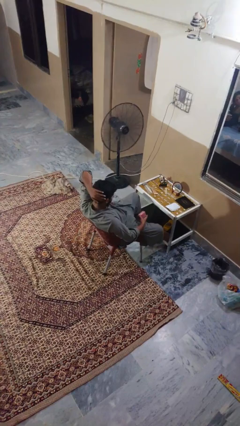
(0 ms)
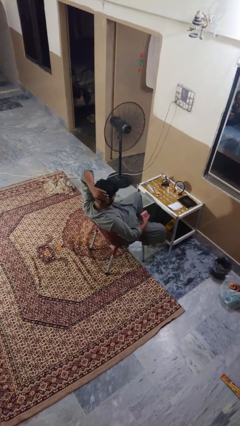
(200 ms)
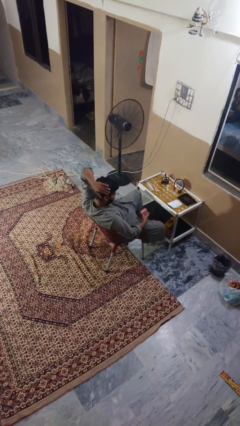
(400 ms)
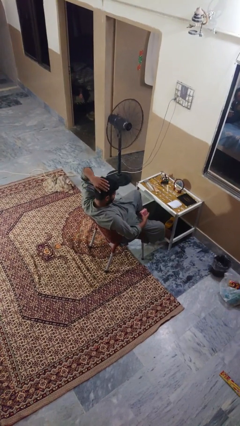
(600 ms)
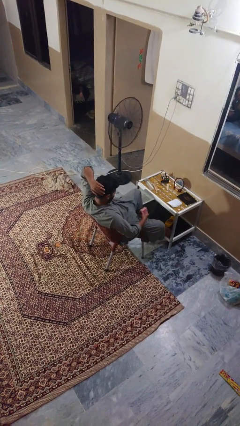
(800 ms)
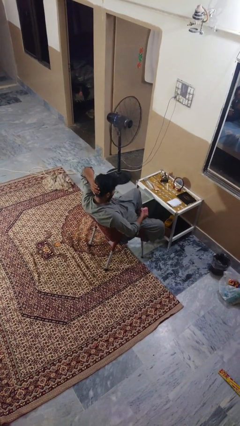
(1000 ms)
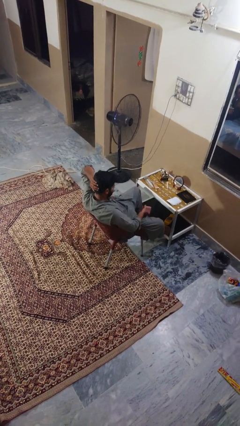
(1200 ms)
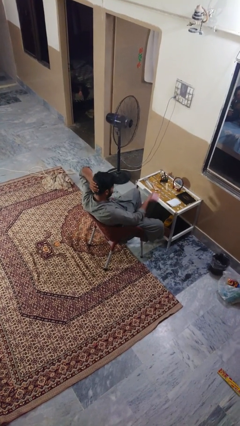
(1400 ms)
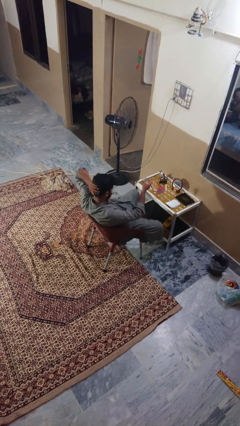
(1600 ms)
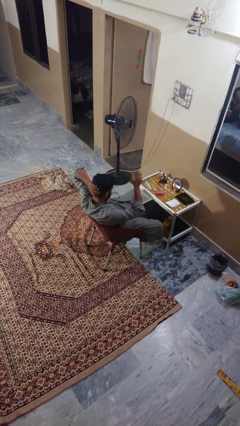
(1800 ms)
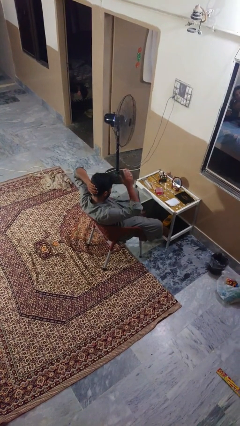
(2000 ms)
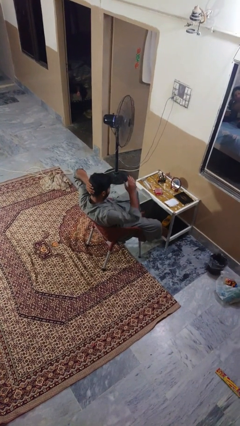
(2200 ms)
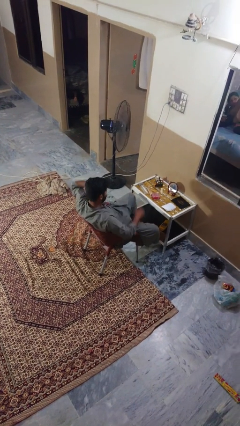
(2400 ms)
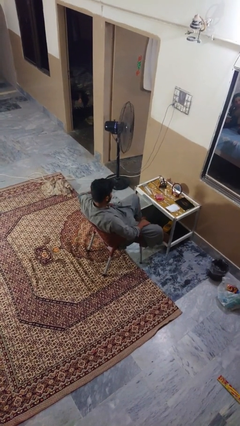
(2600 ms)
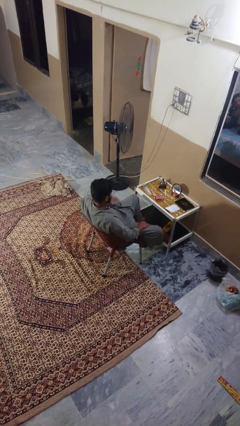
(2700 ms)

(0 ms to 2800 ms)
person throws object on table

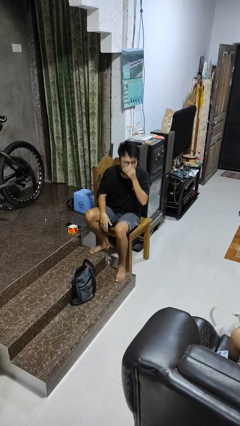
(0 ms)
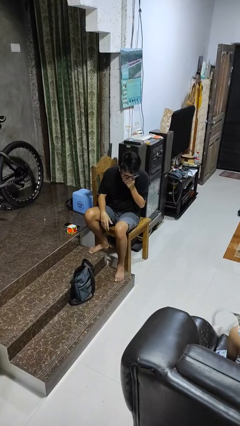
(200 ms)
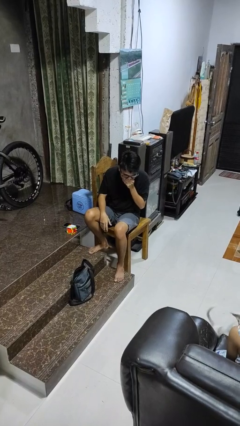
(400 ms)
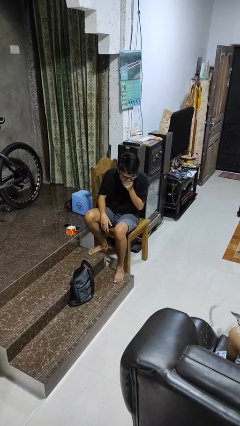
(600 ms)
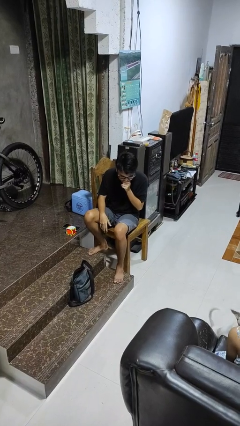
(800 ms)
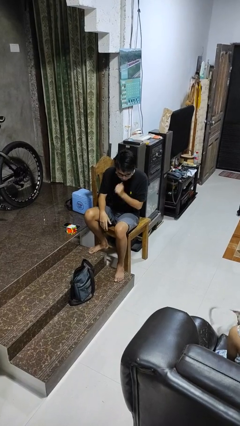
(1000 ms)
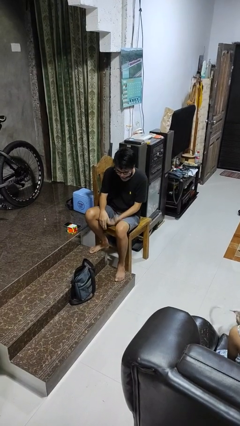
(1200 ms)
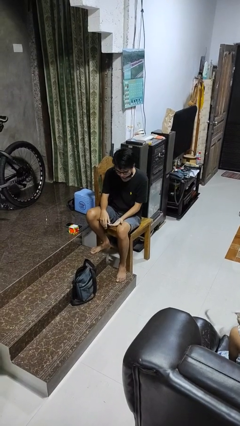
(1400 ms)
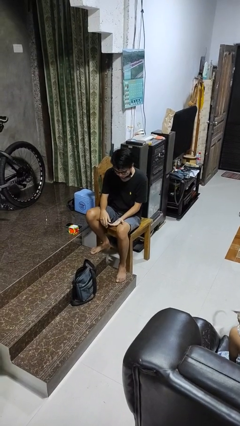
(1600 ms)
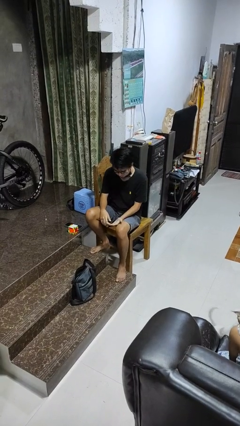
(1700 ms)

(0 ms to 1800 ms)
person sneezes into hand

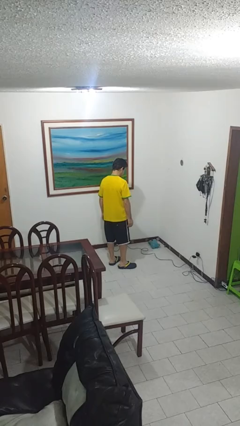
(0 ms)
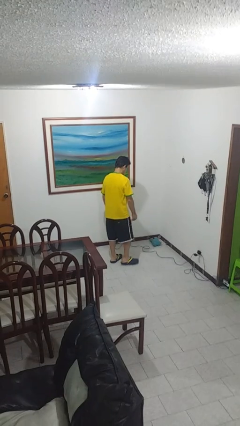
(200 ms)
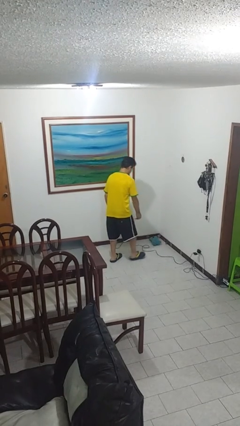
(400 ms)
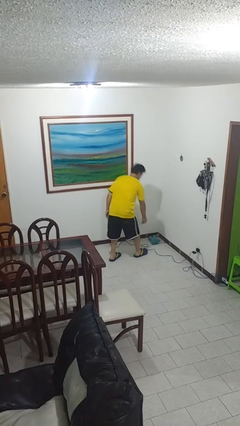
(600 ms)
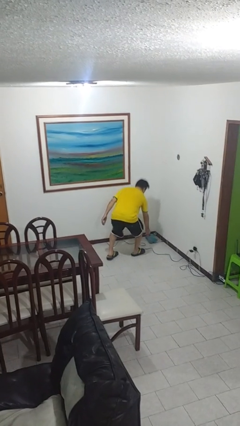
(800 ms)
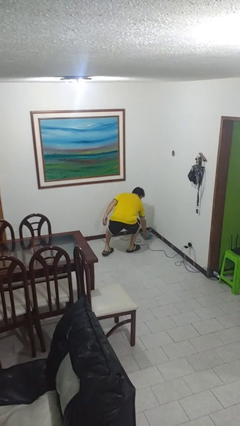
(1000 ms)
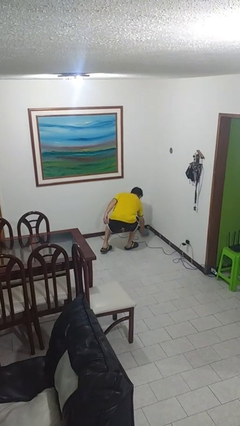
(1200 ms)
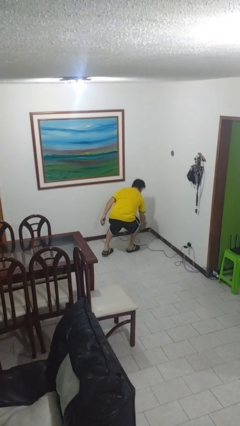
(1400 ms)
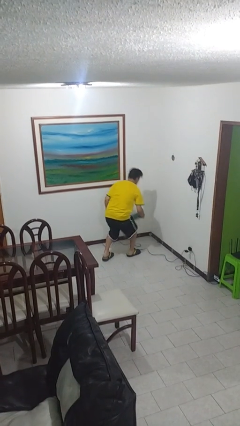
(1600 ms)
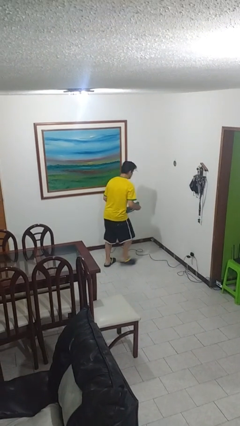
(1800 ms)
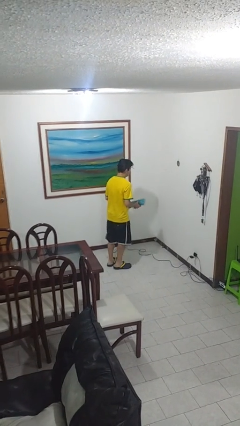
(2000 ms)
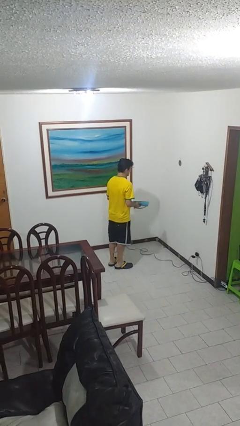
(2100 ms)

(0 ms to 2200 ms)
person picks up object from floor

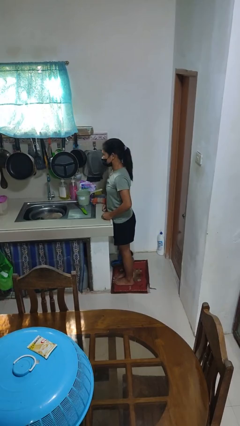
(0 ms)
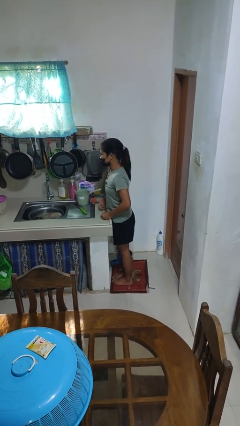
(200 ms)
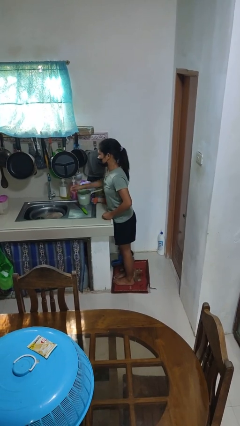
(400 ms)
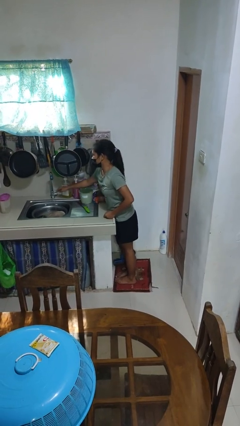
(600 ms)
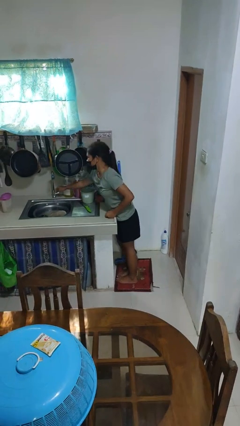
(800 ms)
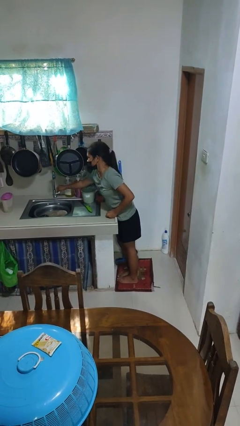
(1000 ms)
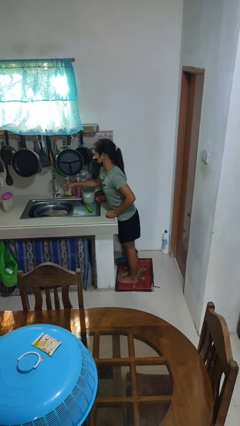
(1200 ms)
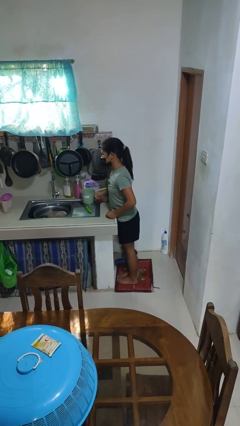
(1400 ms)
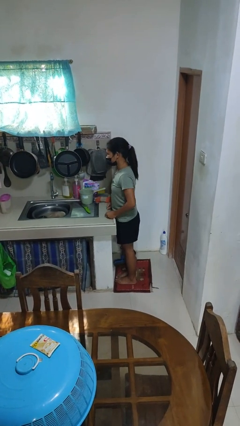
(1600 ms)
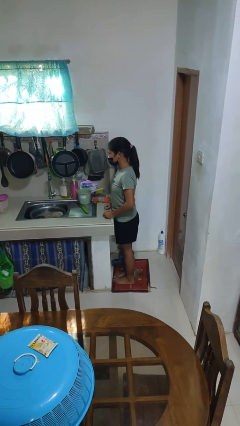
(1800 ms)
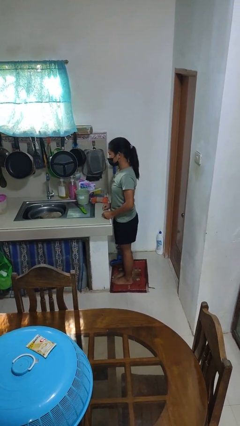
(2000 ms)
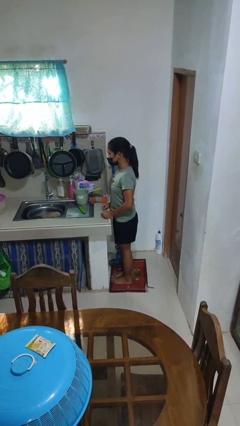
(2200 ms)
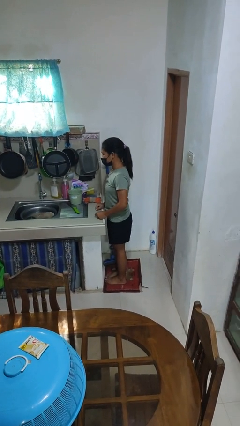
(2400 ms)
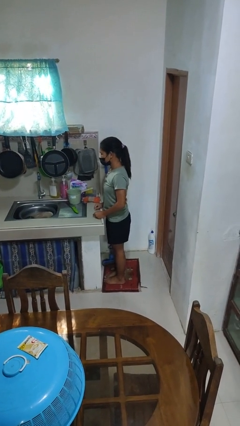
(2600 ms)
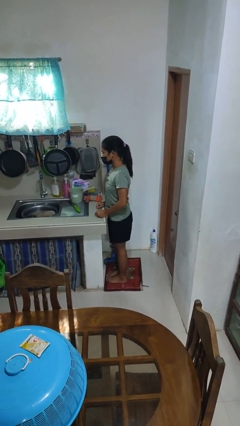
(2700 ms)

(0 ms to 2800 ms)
person turns off faucet

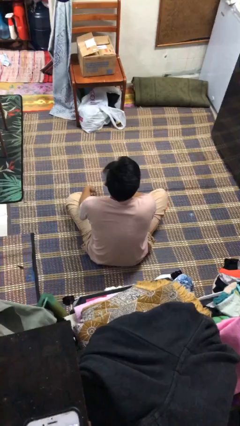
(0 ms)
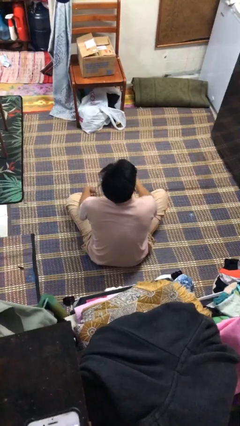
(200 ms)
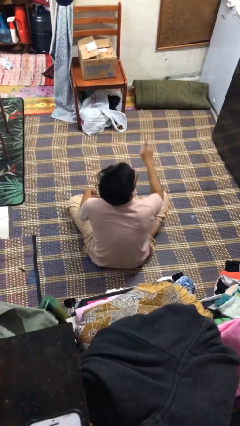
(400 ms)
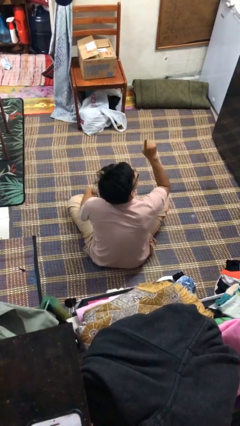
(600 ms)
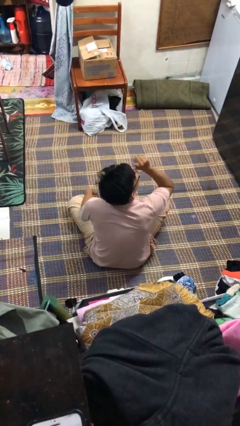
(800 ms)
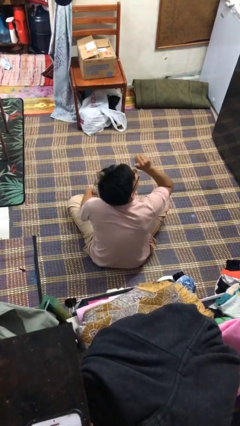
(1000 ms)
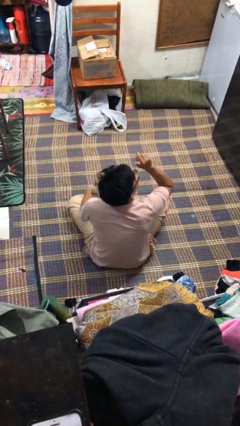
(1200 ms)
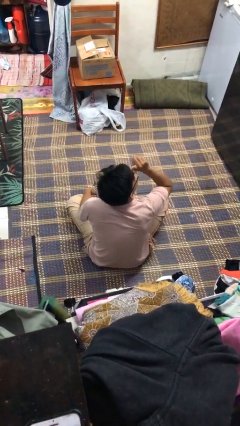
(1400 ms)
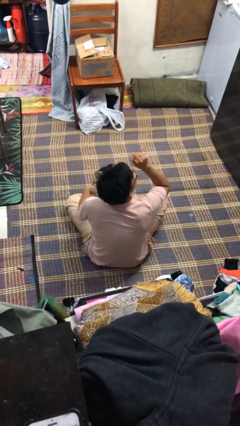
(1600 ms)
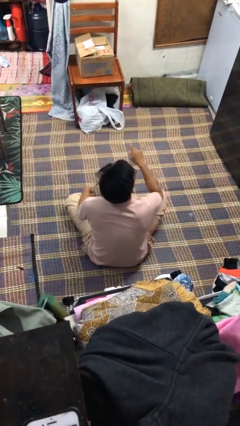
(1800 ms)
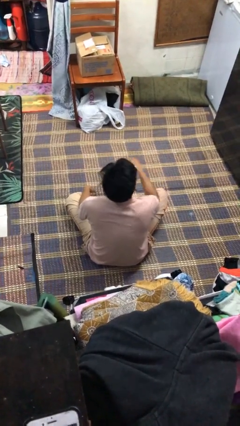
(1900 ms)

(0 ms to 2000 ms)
person gestures be quiet

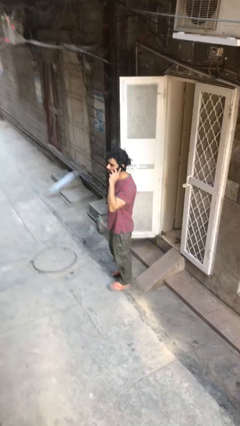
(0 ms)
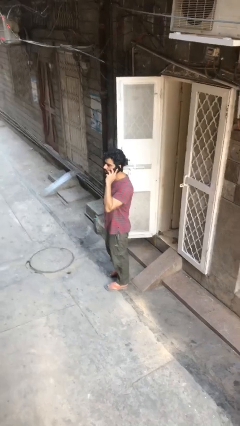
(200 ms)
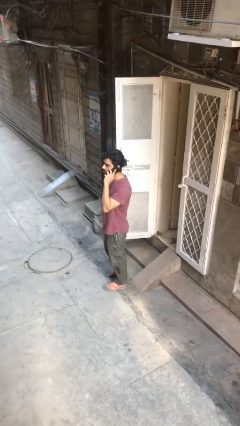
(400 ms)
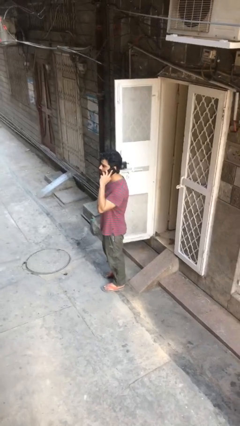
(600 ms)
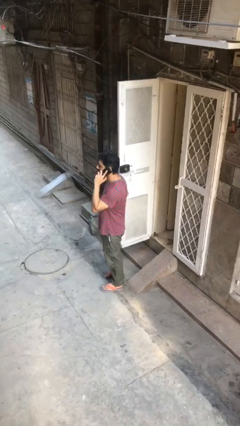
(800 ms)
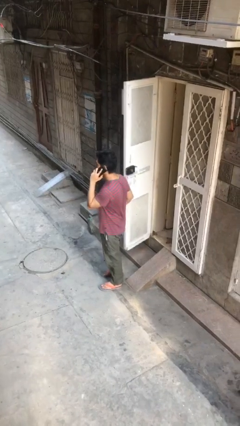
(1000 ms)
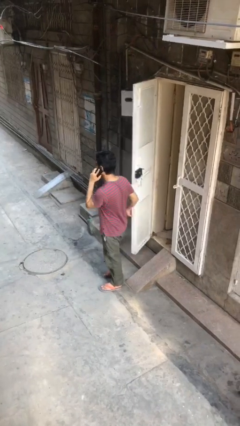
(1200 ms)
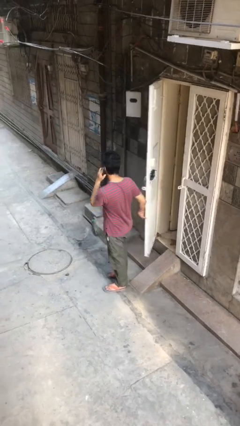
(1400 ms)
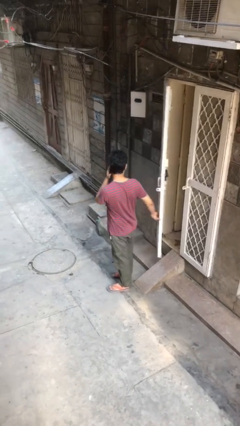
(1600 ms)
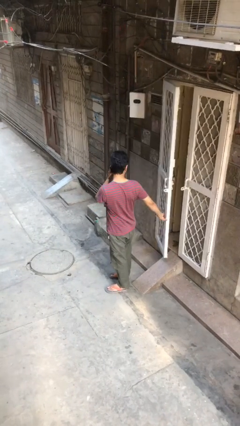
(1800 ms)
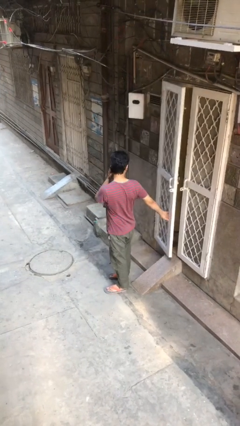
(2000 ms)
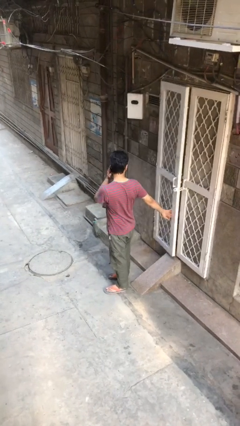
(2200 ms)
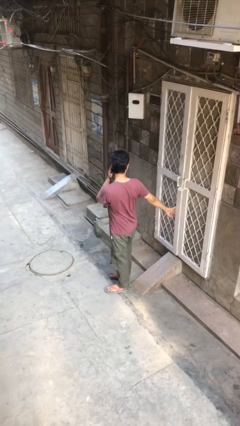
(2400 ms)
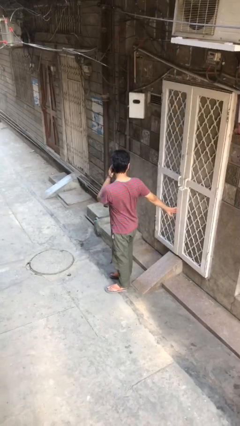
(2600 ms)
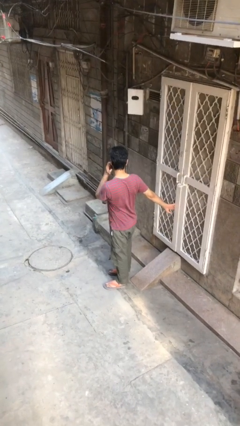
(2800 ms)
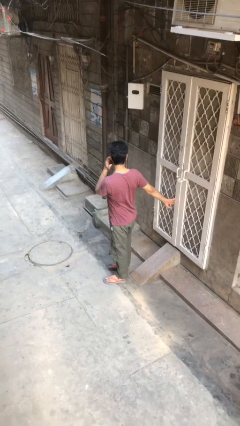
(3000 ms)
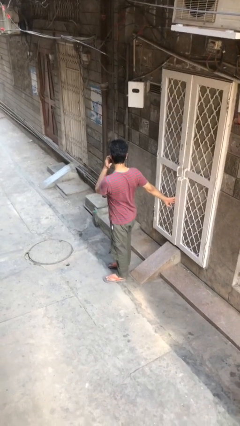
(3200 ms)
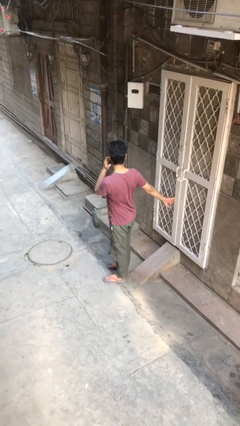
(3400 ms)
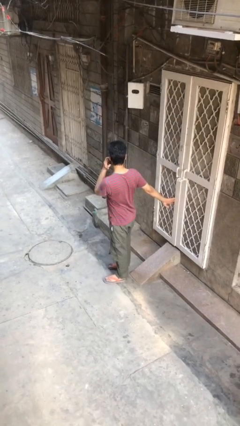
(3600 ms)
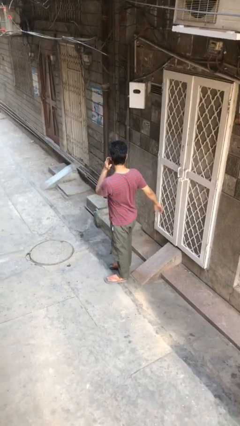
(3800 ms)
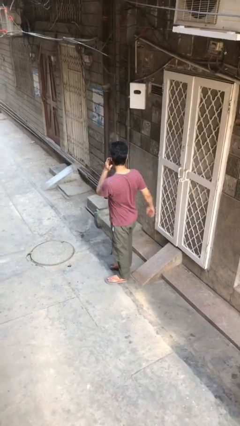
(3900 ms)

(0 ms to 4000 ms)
person closes facility door

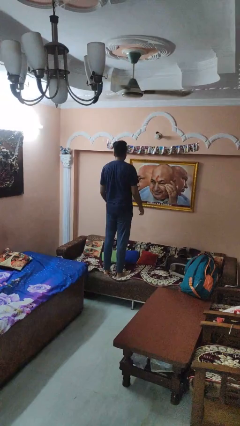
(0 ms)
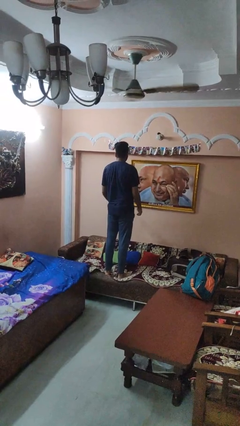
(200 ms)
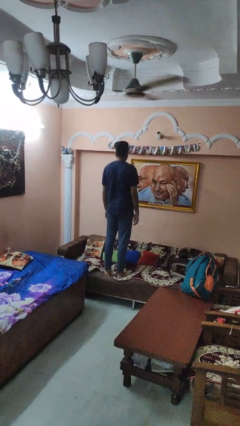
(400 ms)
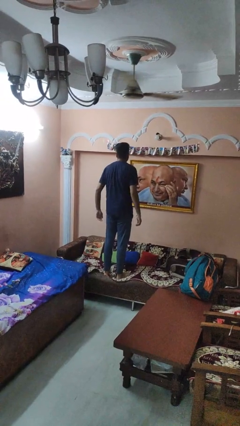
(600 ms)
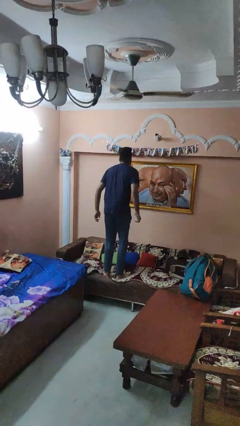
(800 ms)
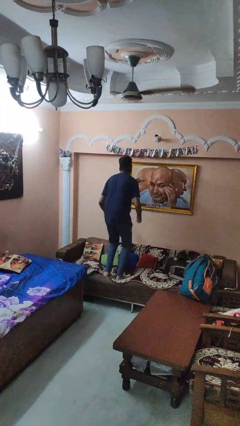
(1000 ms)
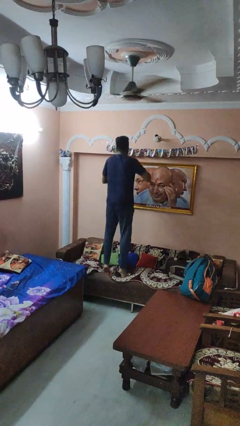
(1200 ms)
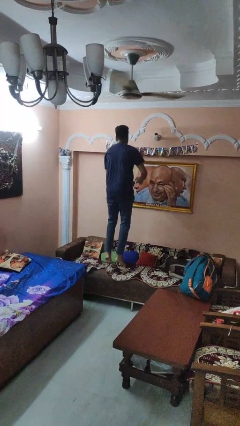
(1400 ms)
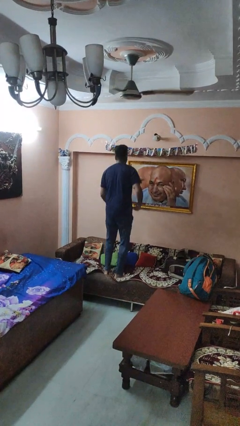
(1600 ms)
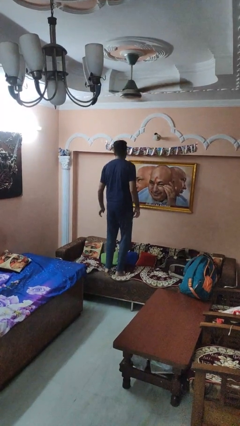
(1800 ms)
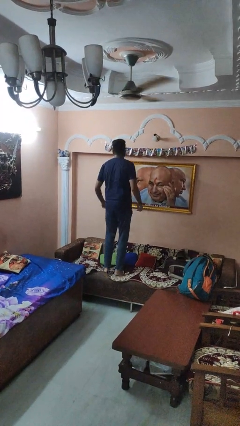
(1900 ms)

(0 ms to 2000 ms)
person jumps on couch
